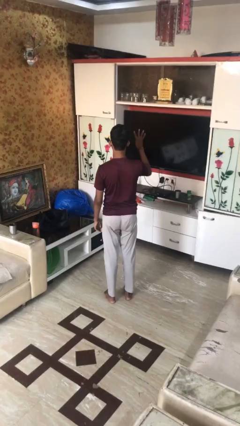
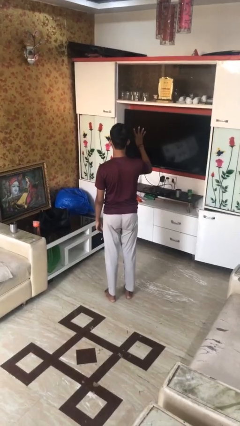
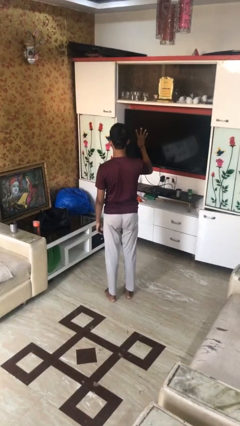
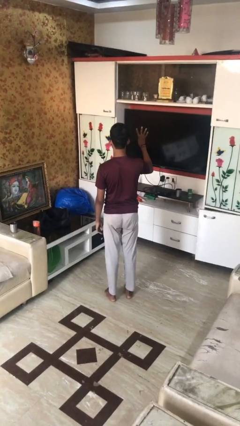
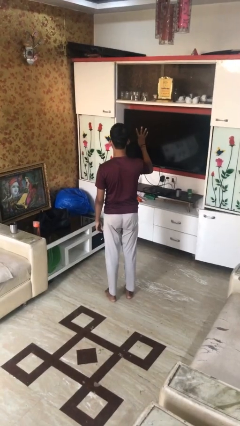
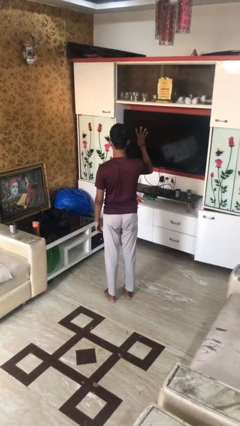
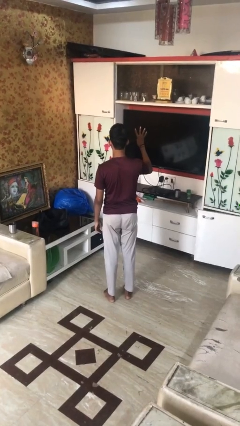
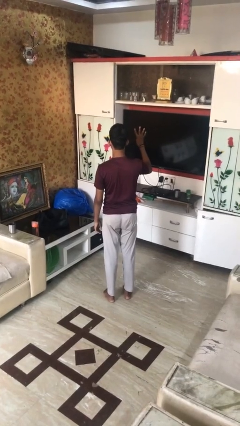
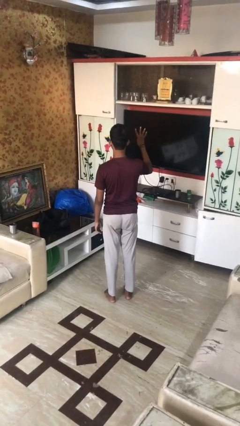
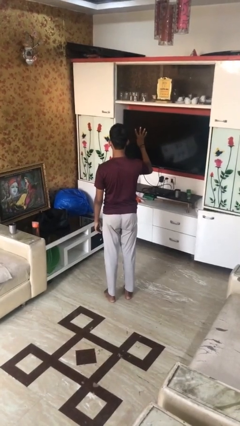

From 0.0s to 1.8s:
person gestures number four

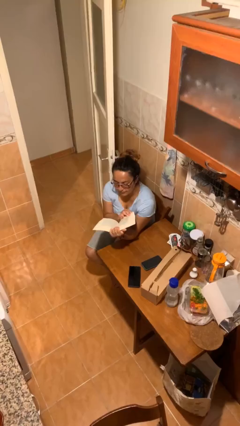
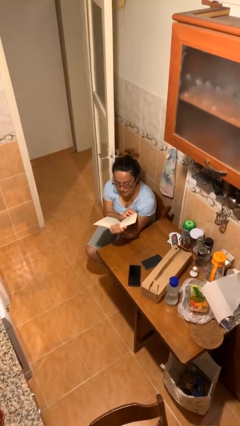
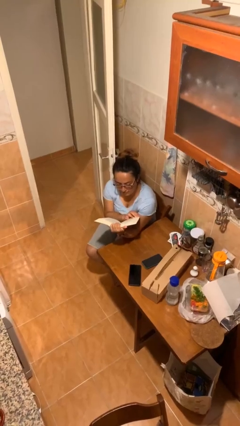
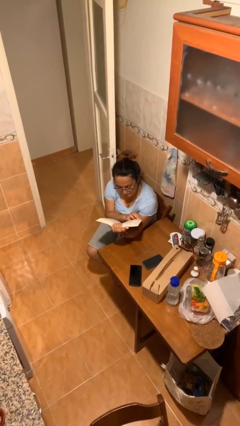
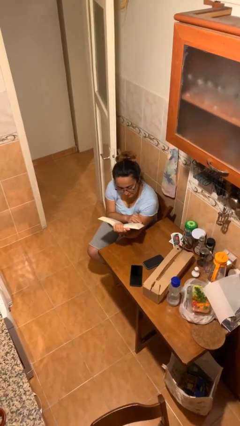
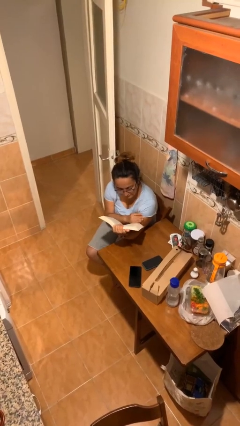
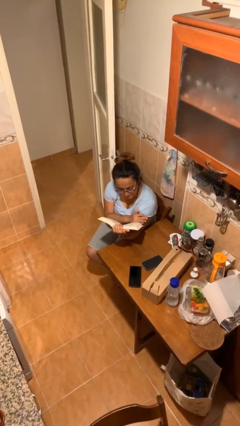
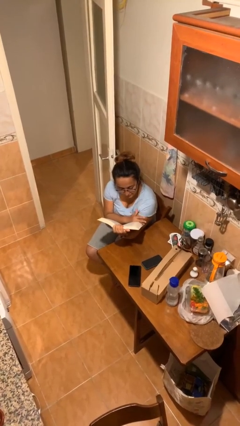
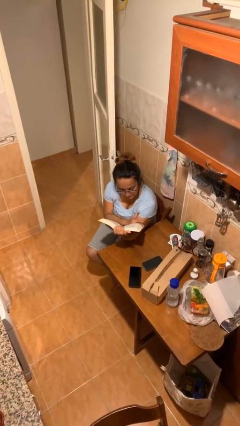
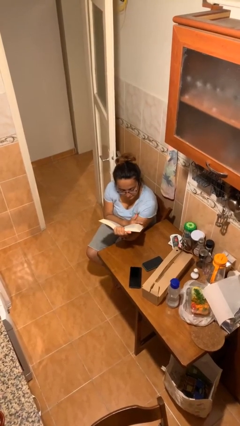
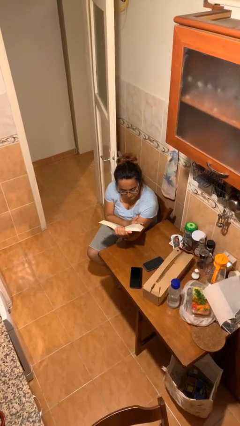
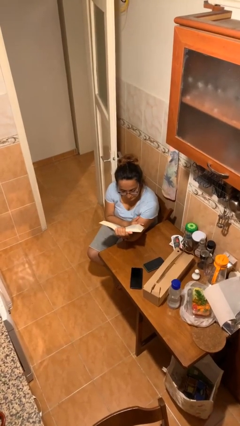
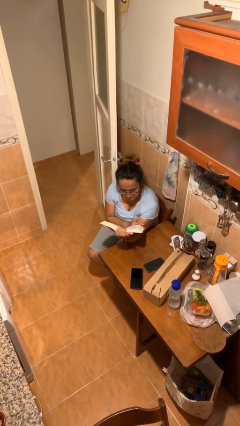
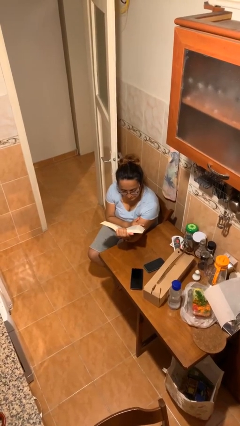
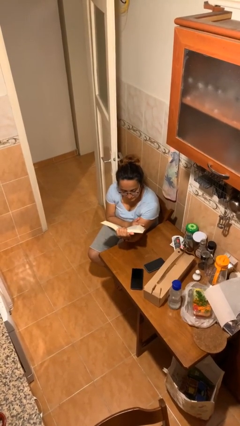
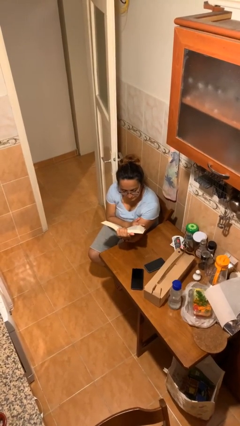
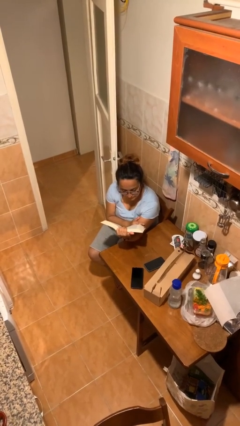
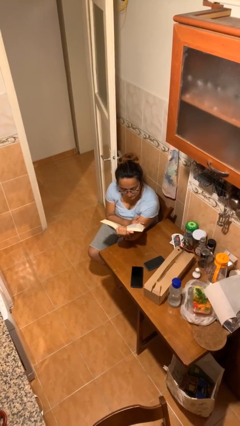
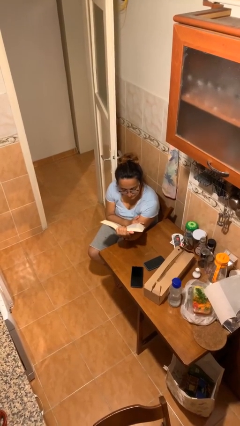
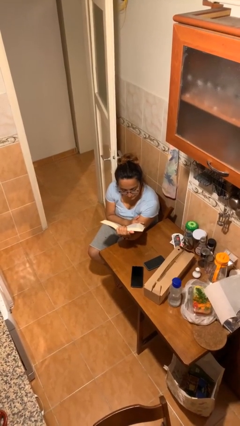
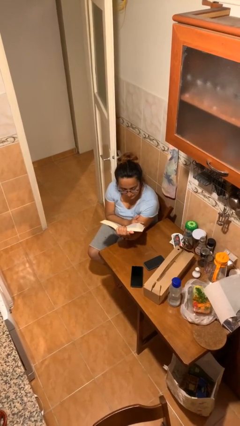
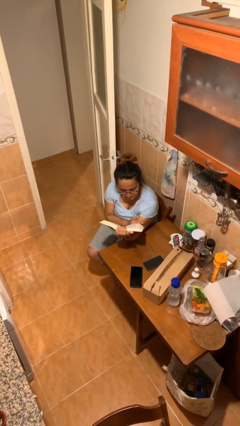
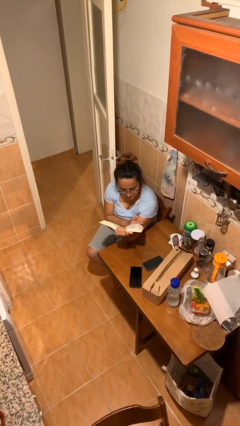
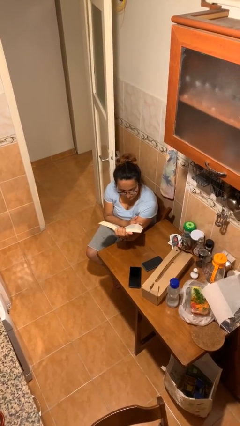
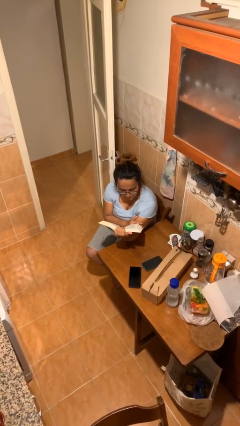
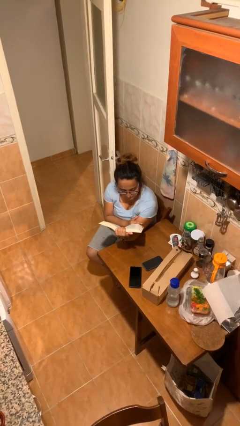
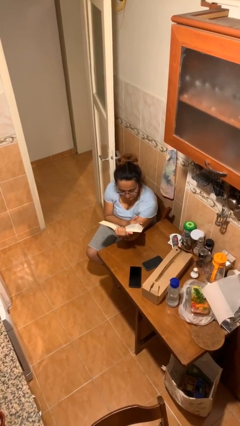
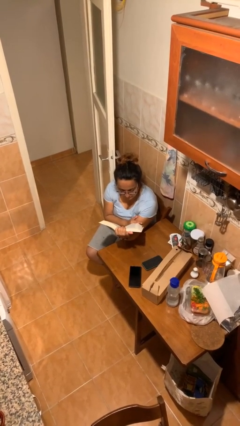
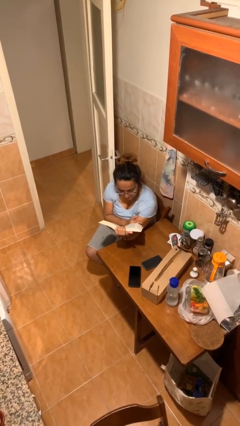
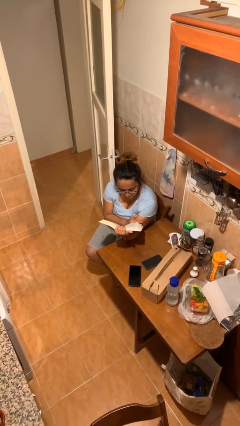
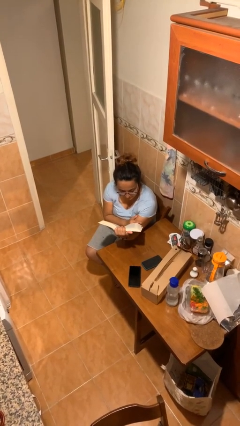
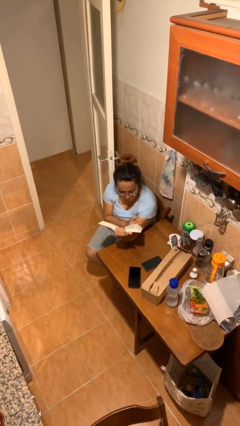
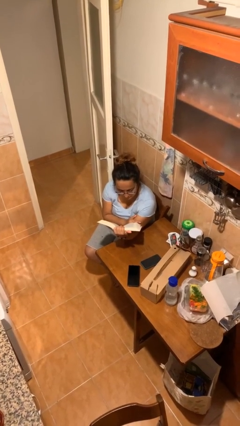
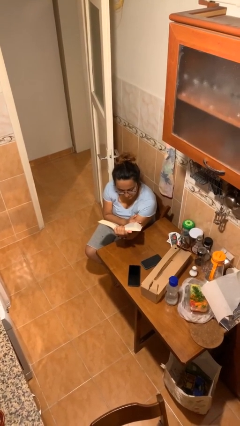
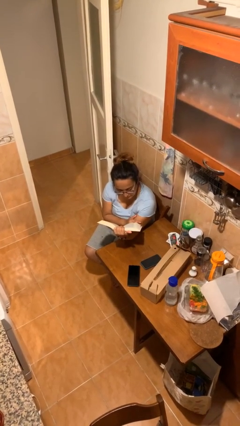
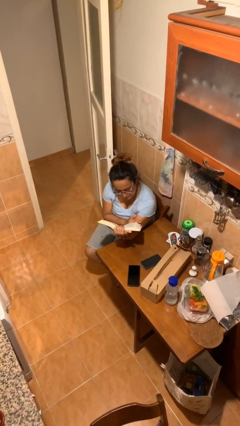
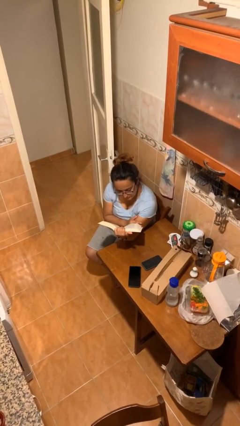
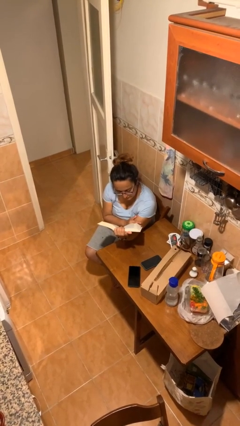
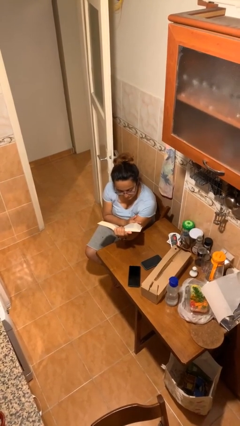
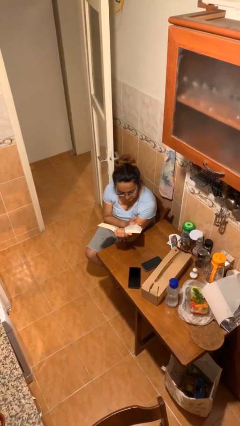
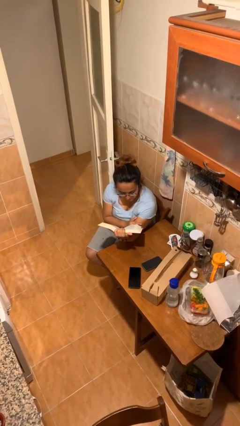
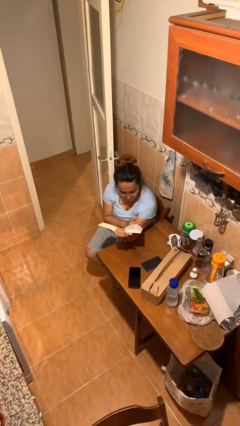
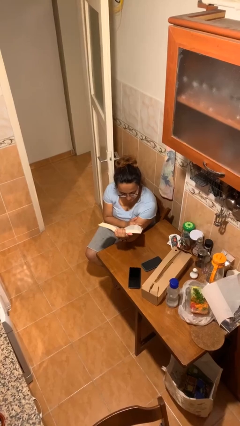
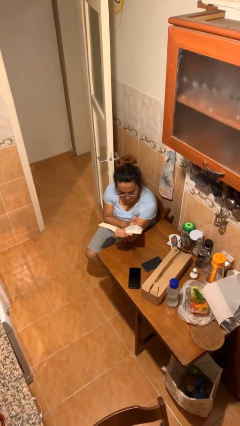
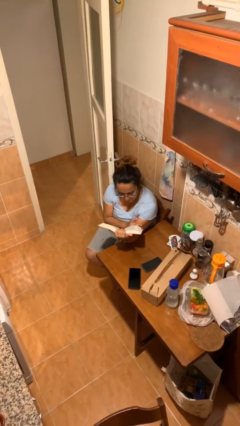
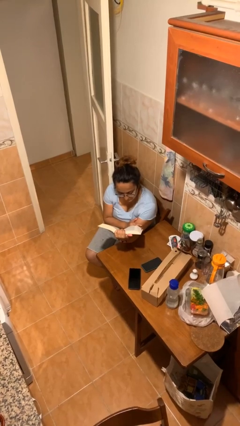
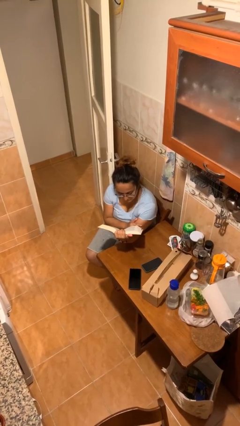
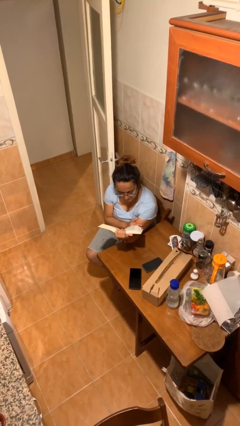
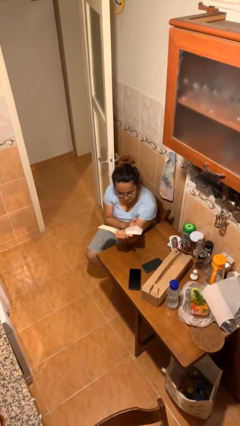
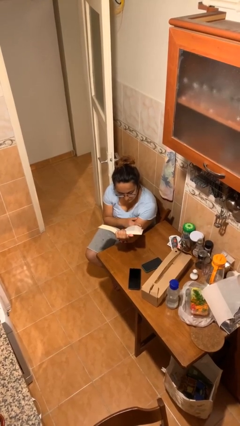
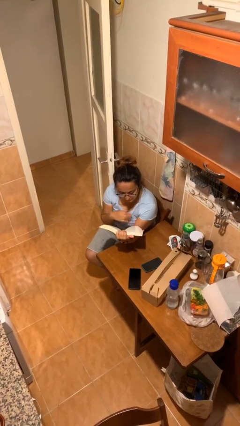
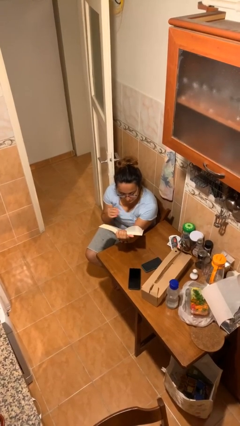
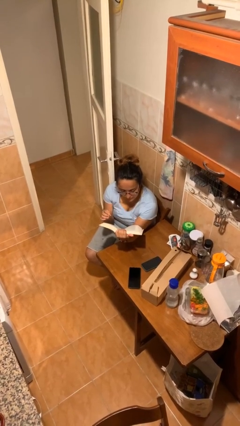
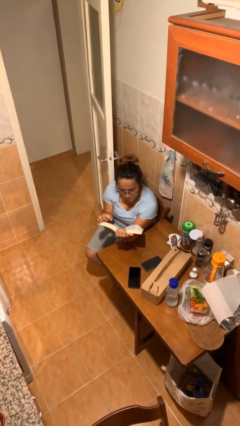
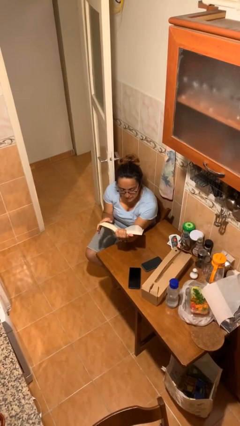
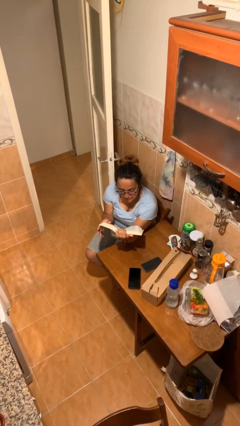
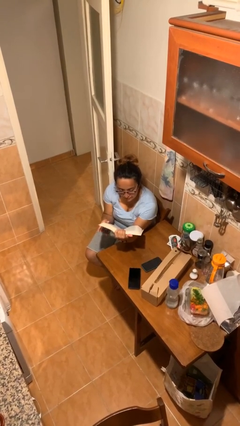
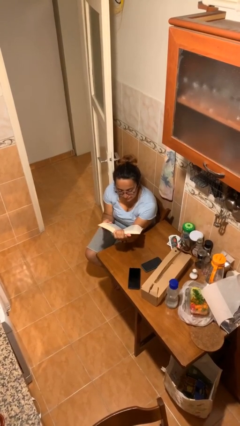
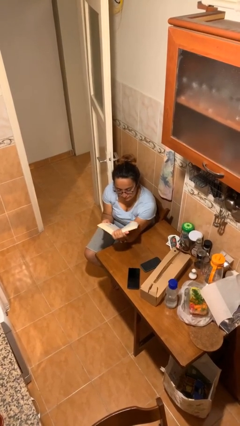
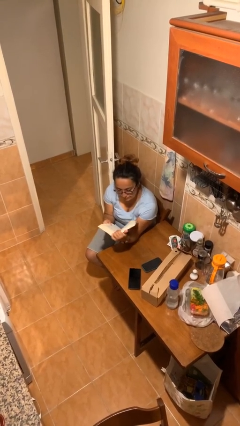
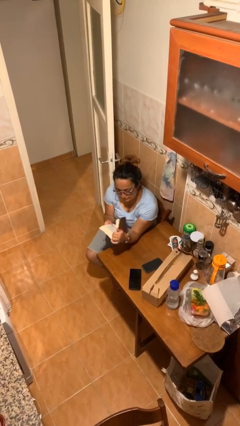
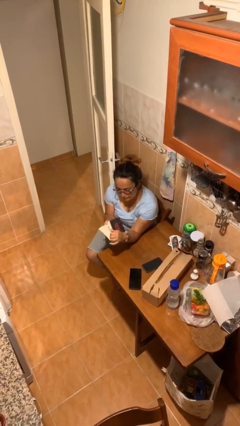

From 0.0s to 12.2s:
person reads document

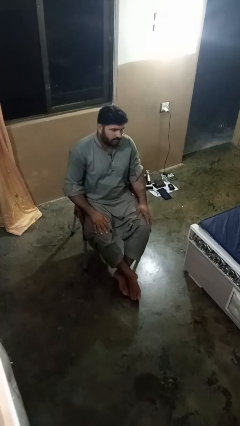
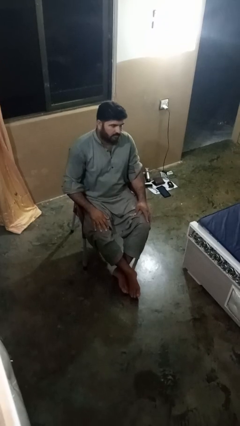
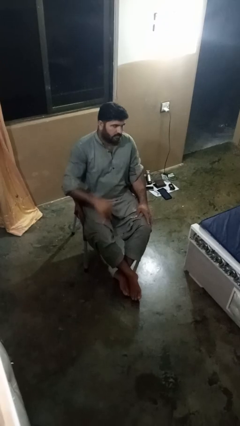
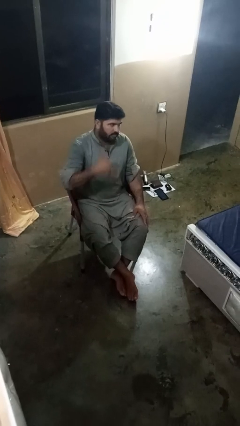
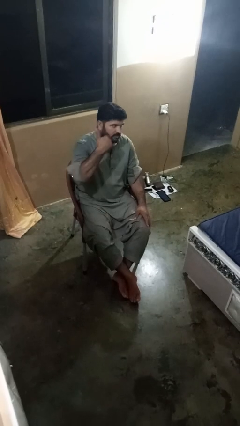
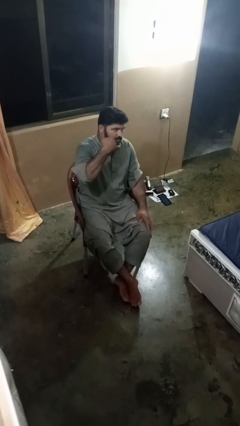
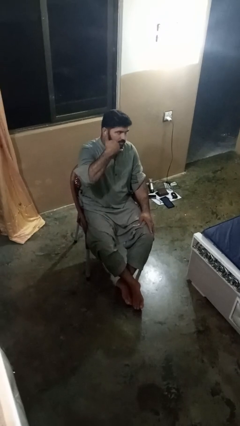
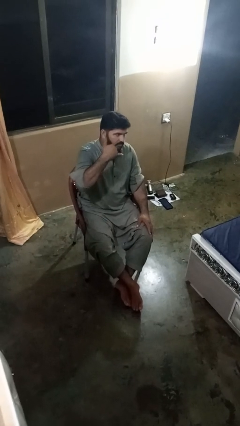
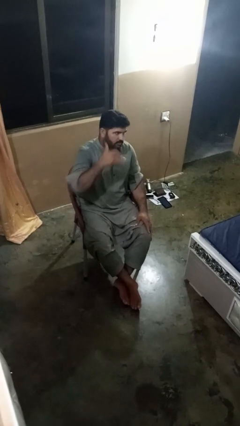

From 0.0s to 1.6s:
person gestures call me

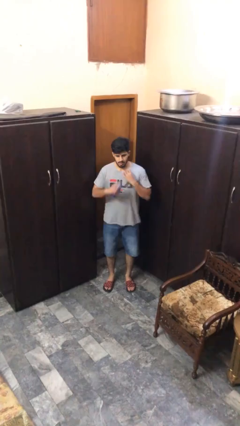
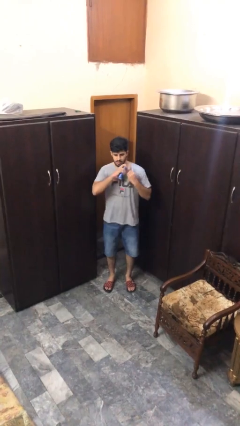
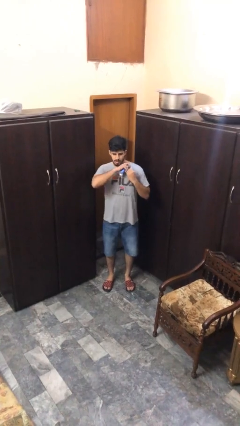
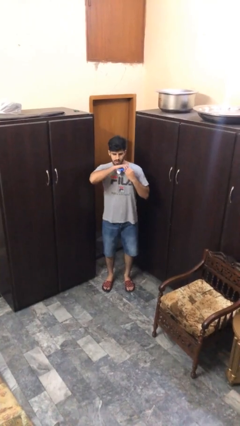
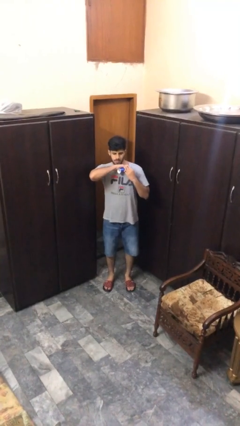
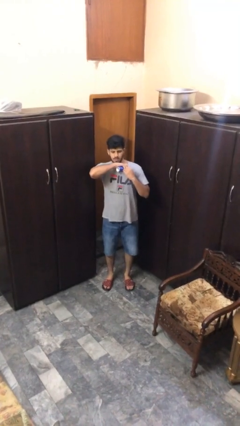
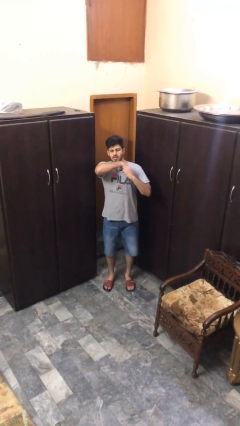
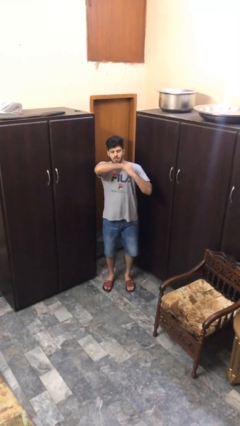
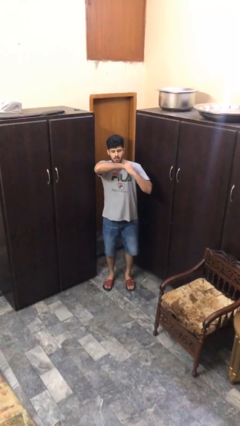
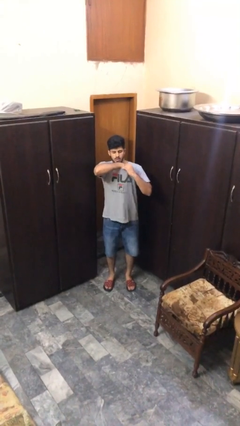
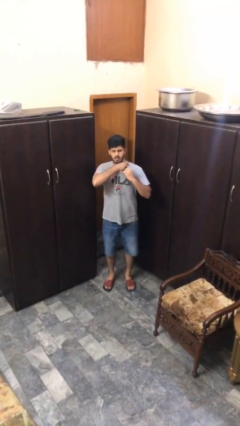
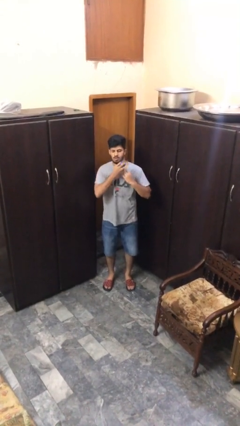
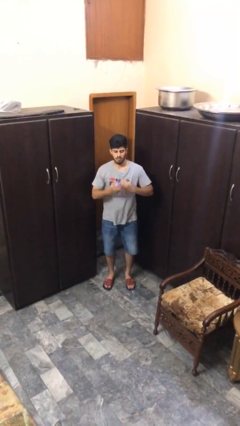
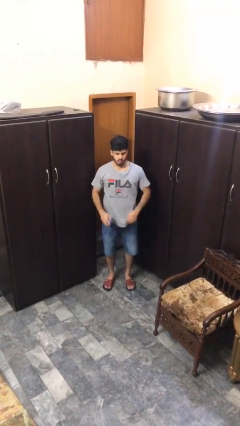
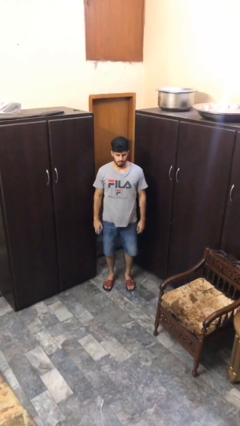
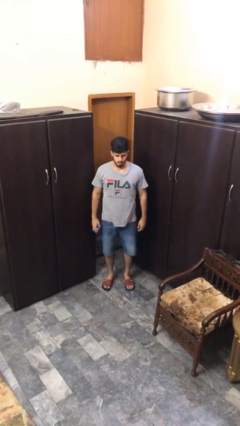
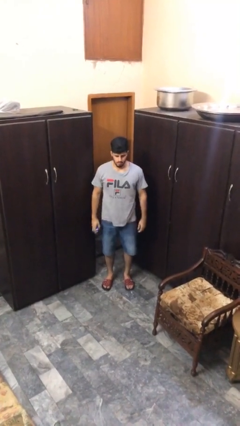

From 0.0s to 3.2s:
person applies deodorant
